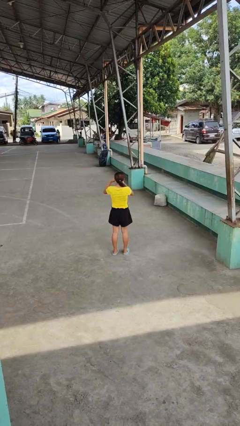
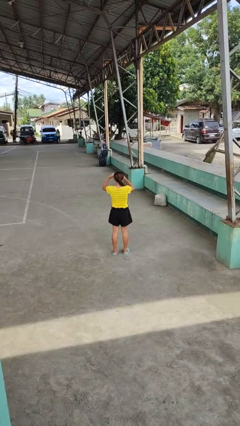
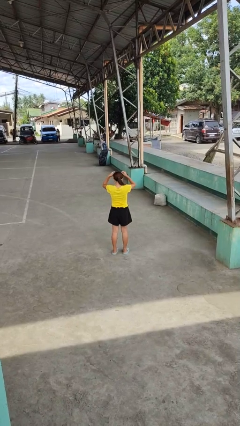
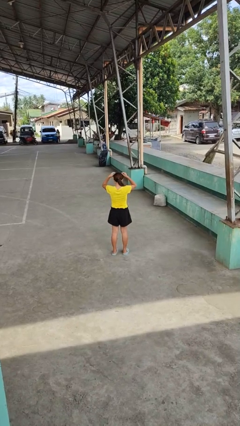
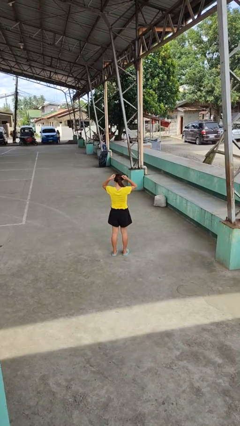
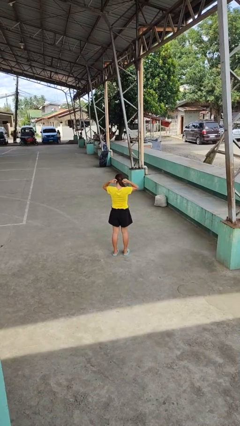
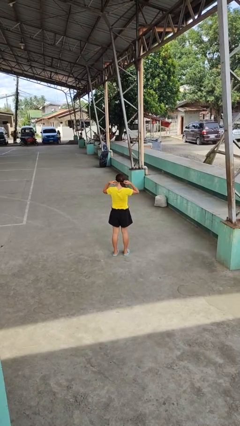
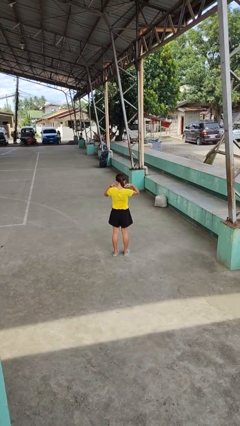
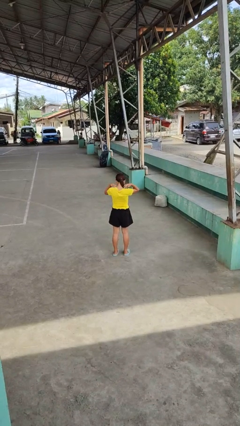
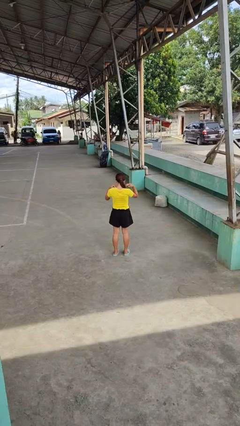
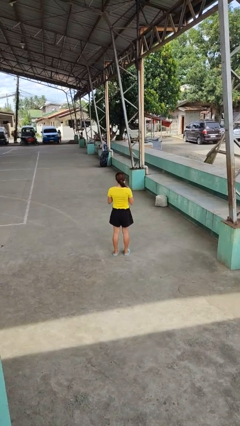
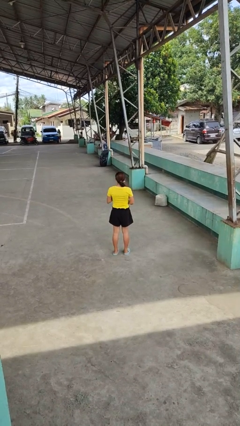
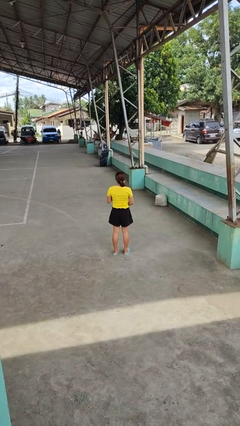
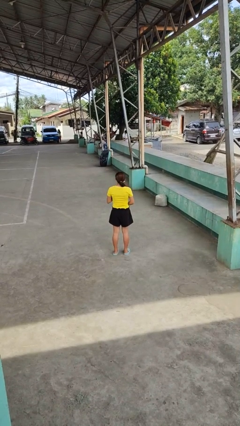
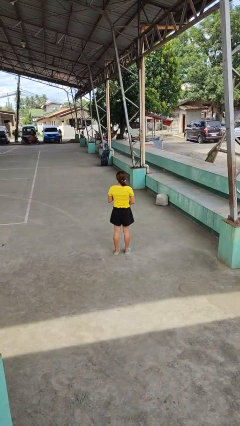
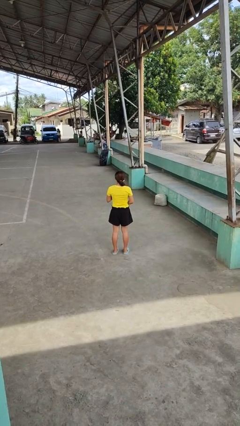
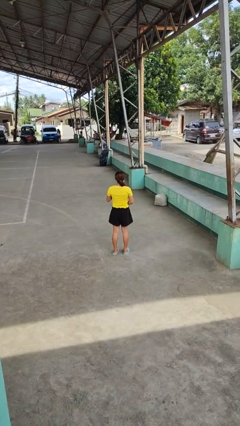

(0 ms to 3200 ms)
person puts on necklace

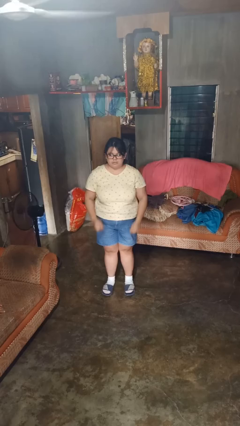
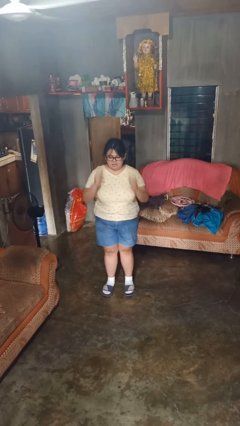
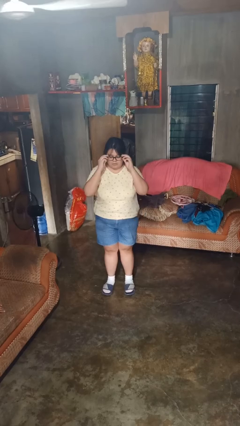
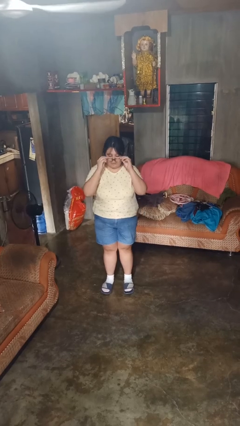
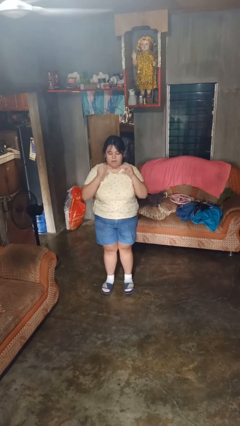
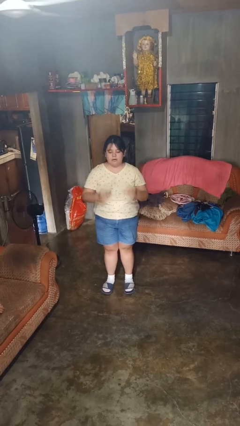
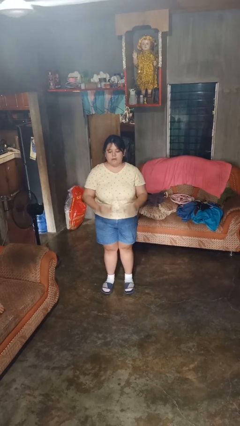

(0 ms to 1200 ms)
person takes off glasses

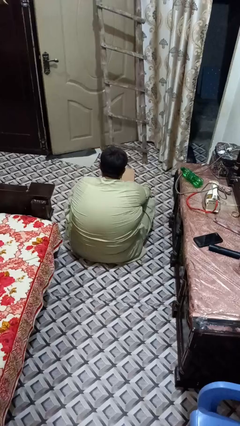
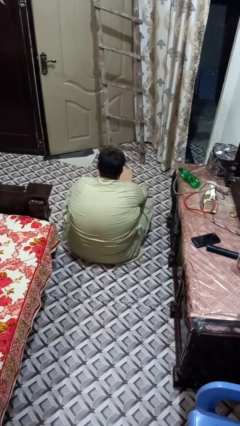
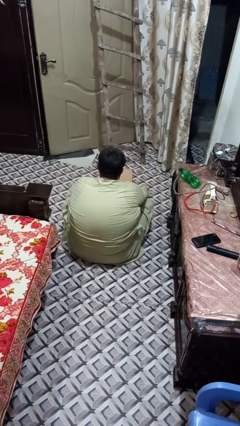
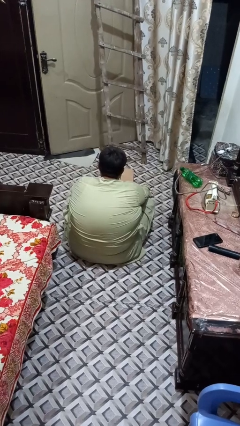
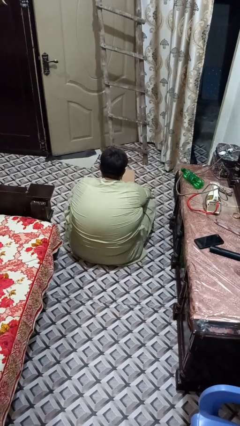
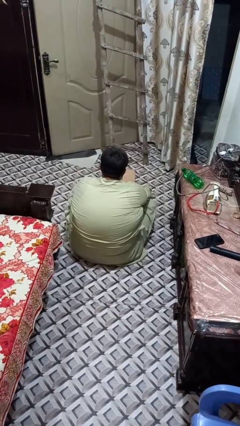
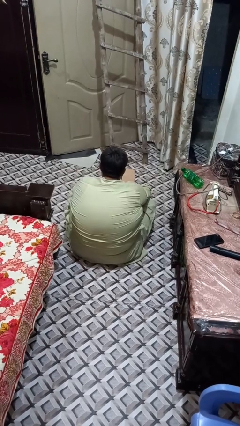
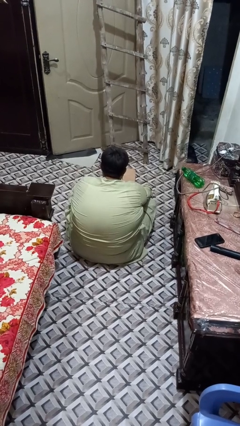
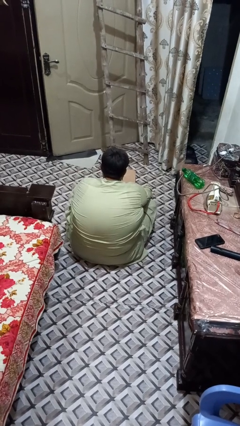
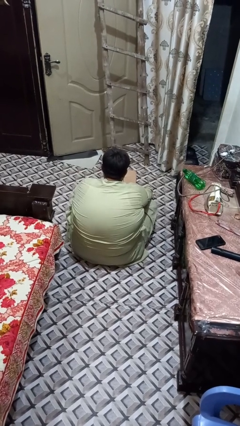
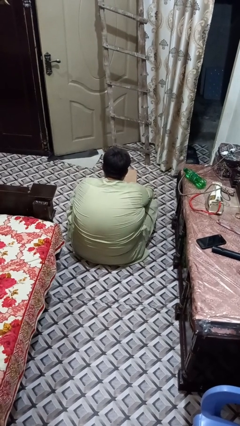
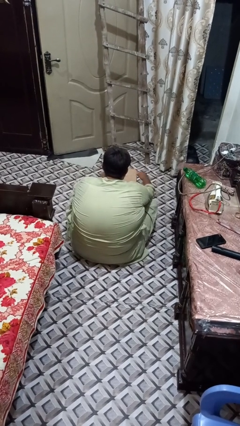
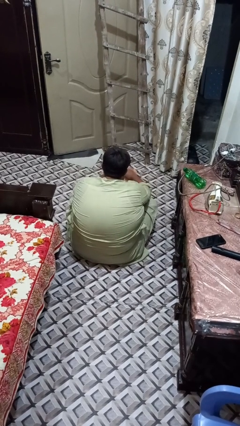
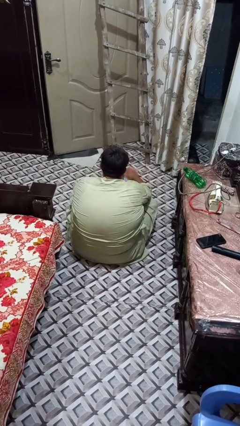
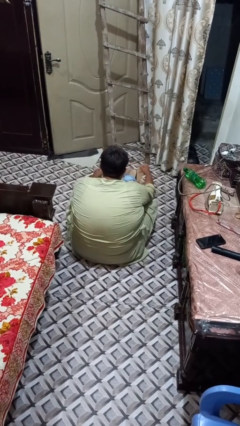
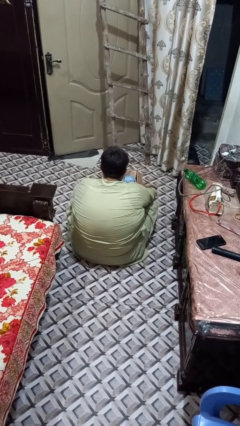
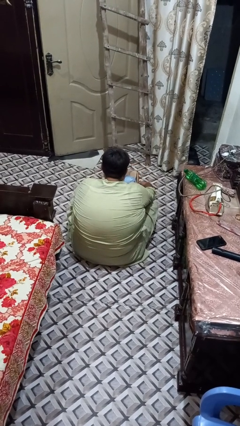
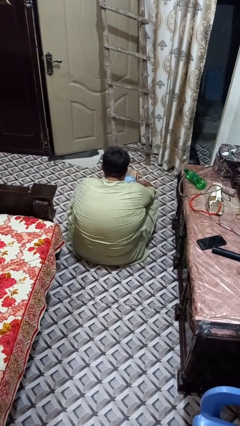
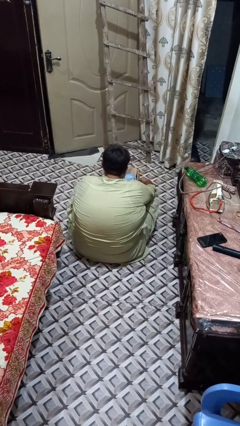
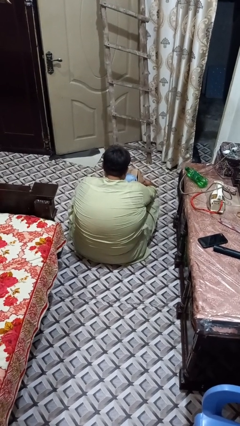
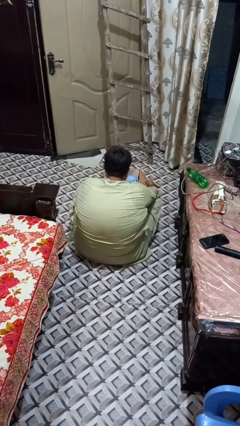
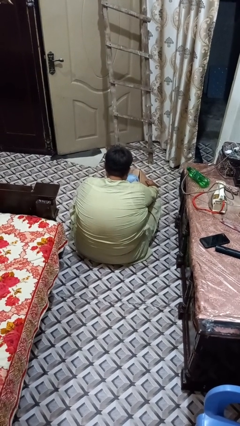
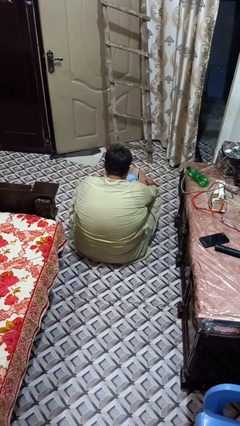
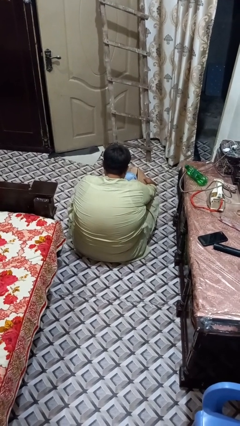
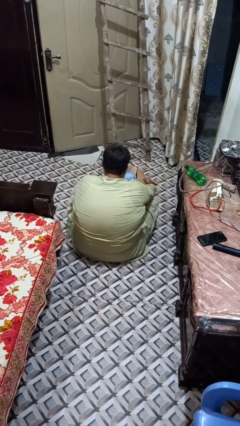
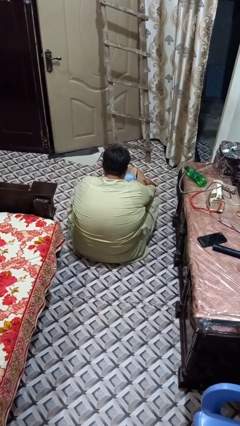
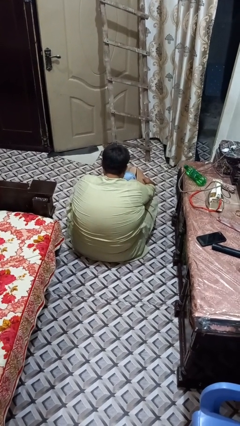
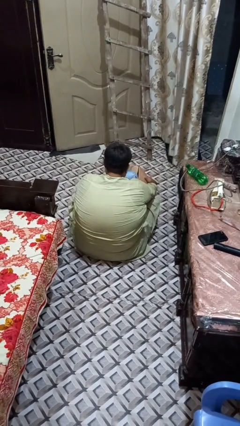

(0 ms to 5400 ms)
person opens box

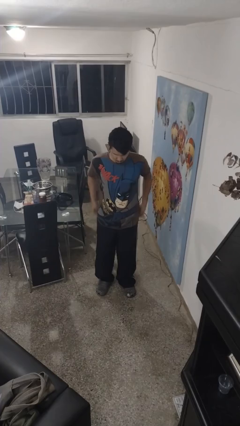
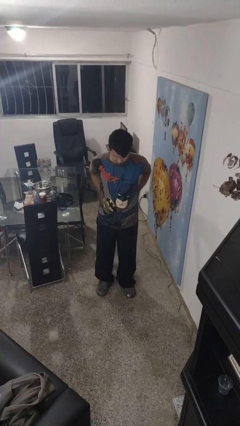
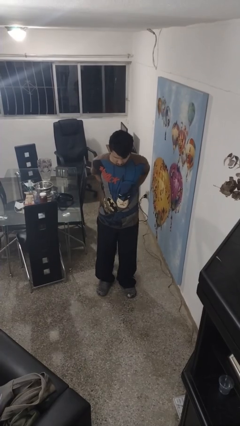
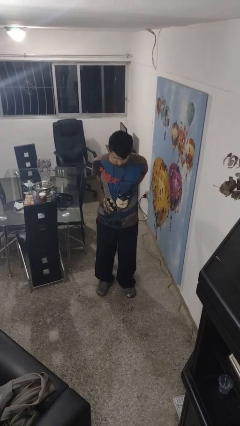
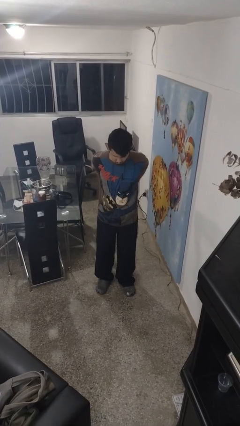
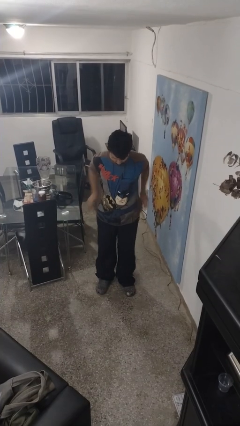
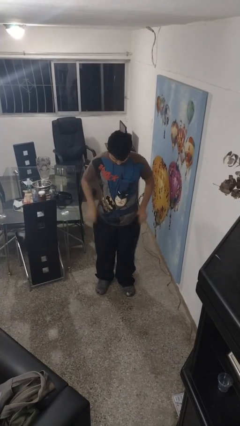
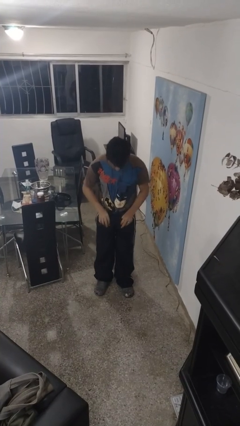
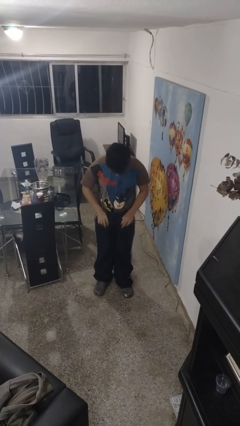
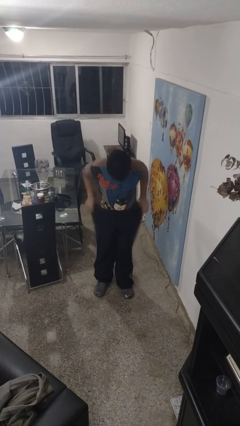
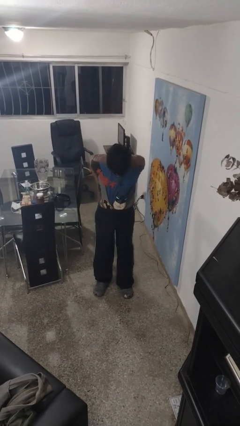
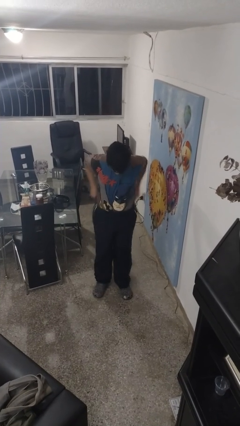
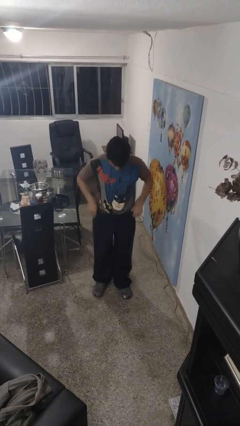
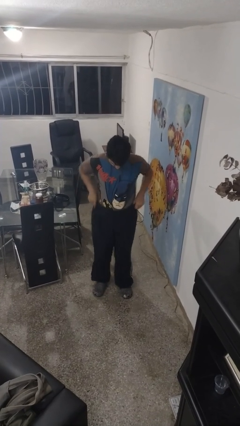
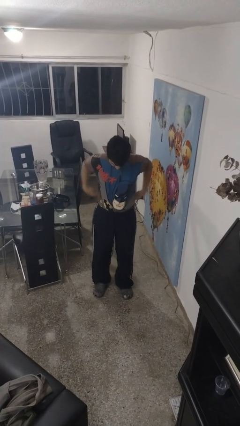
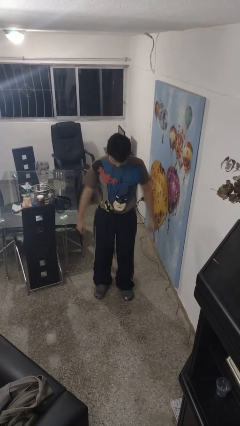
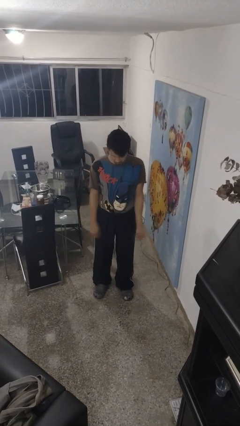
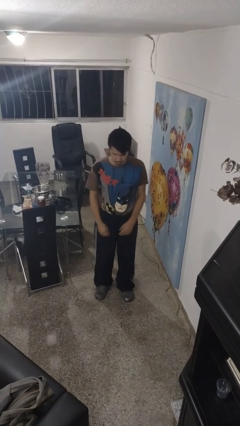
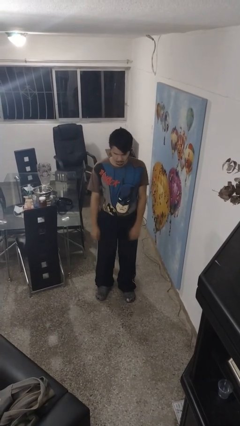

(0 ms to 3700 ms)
person tucks in shirt

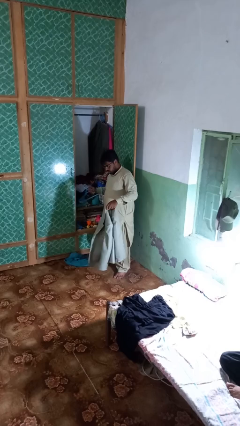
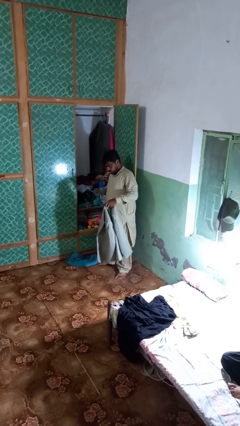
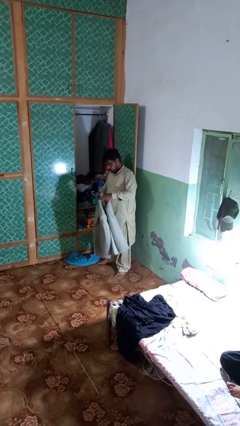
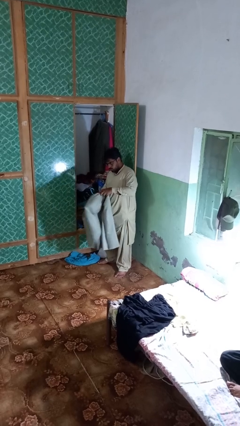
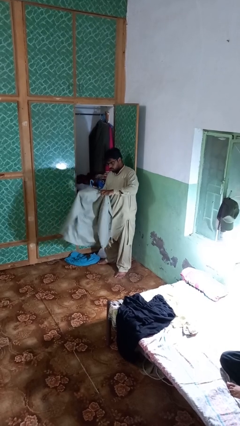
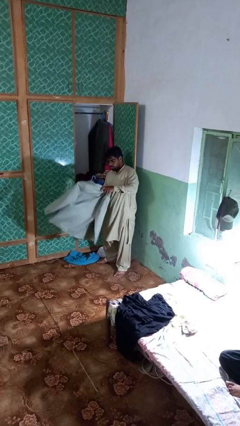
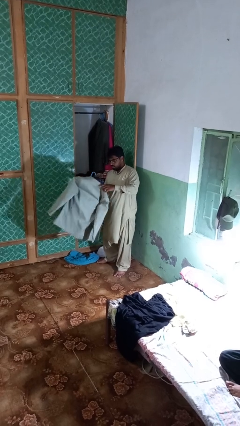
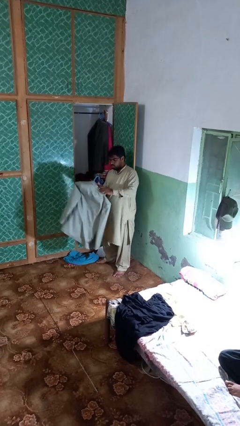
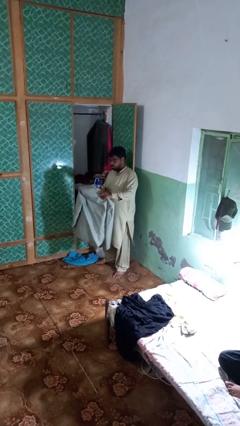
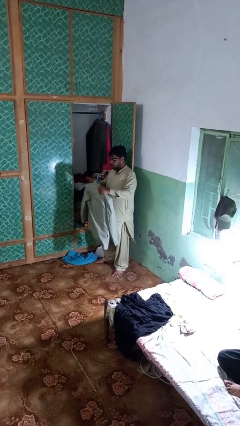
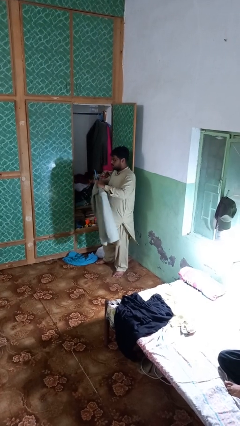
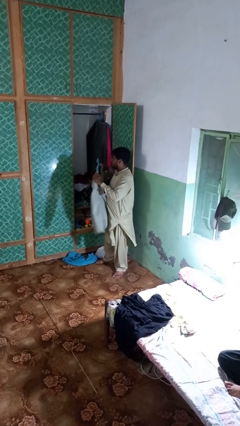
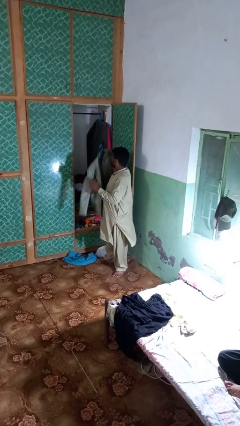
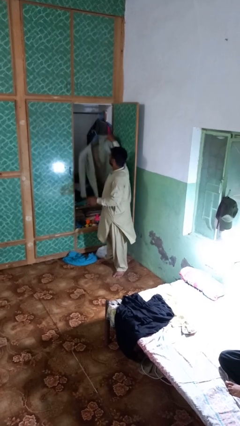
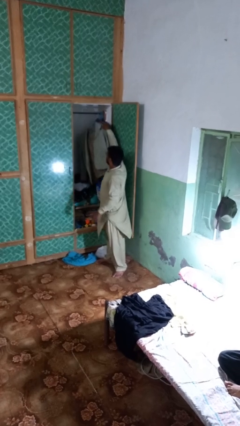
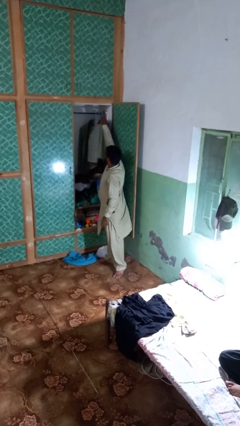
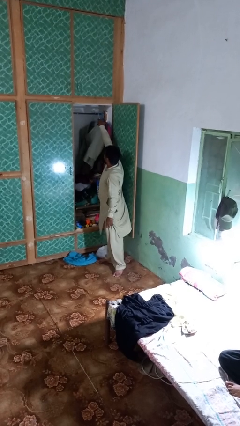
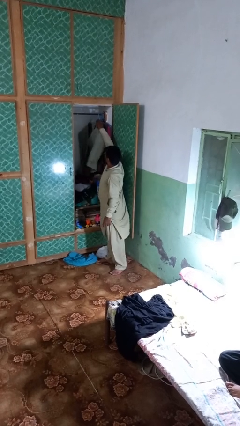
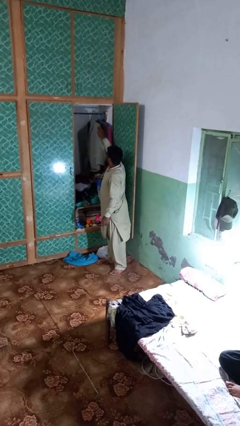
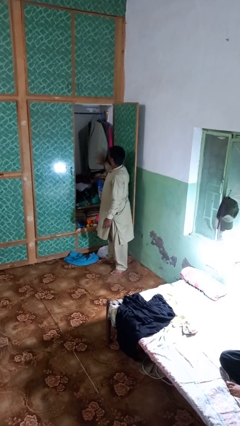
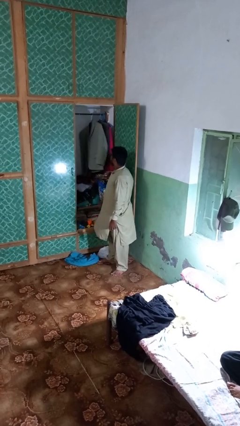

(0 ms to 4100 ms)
person puts clothes into closet
